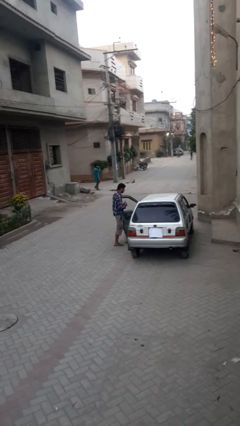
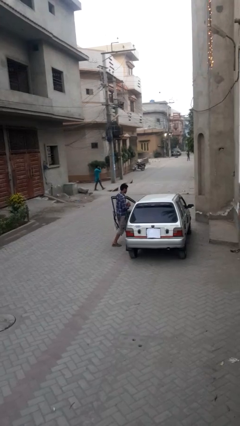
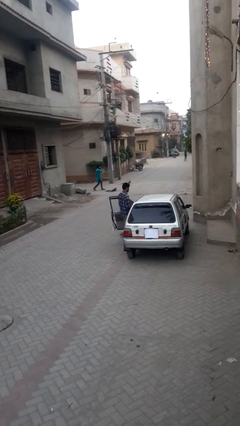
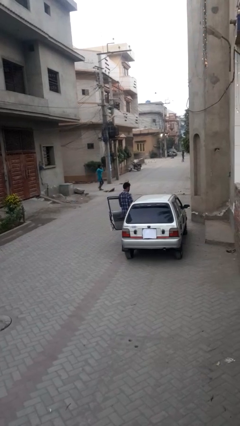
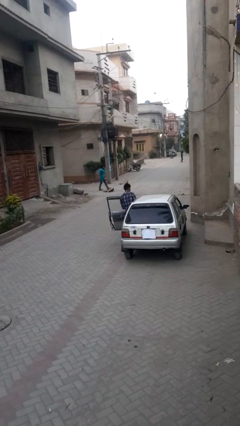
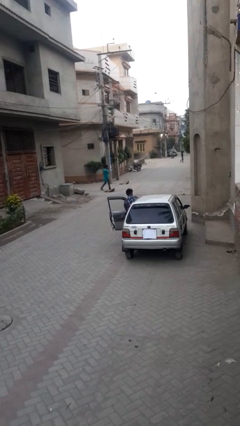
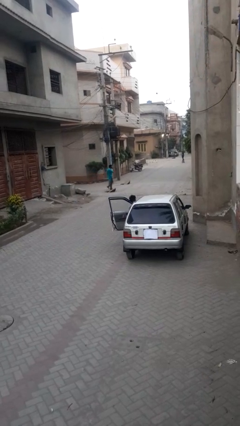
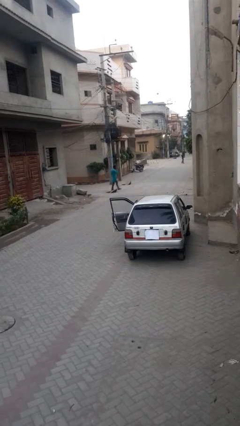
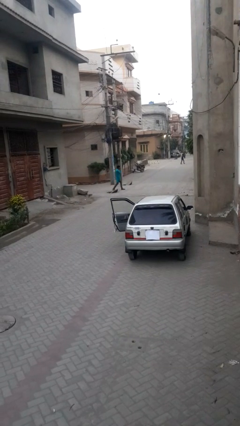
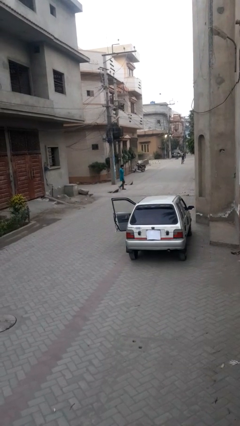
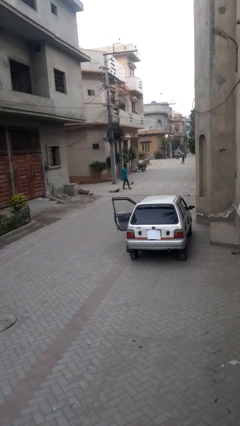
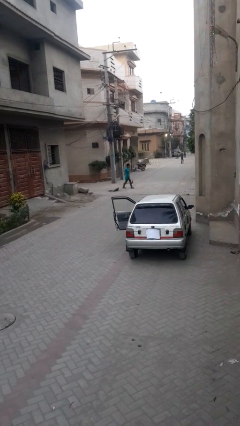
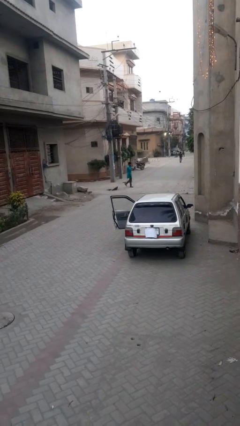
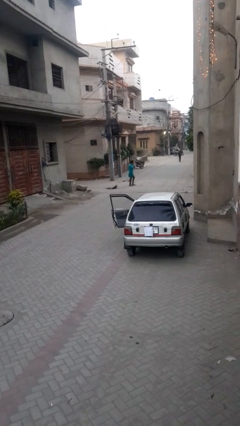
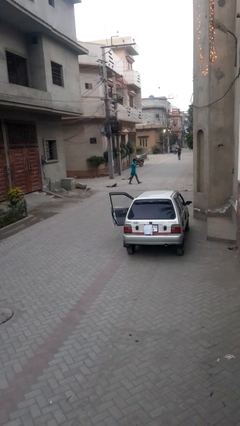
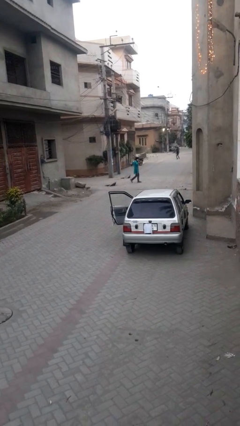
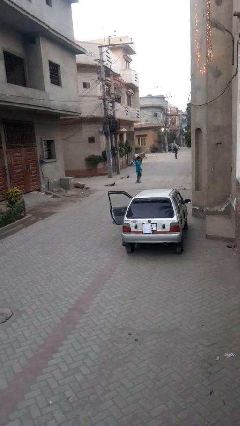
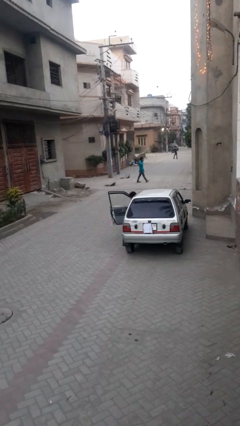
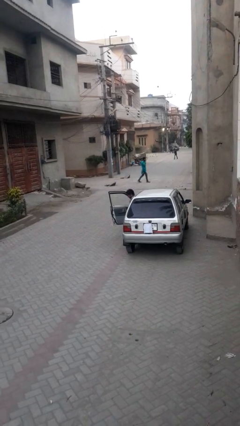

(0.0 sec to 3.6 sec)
person enters car

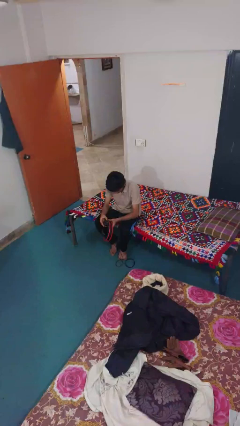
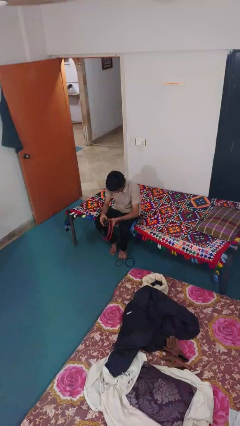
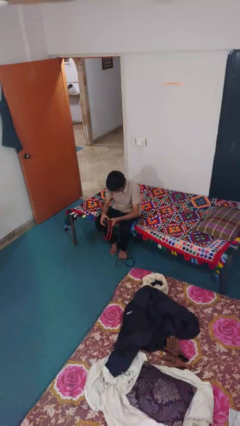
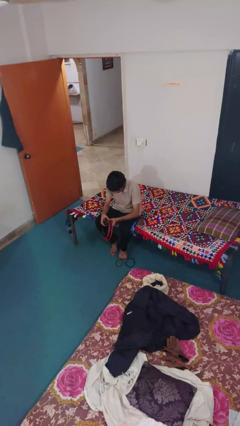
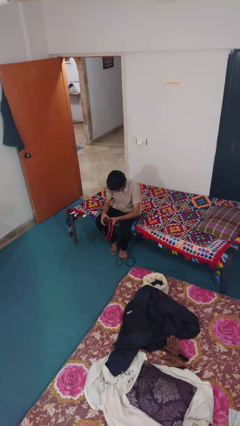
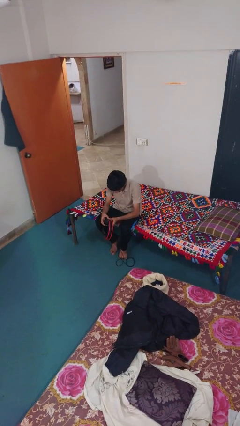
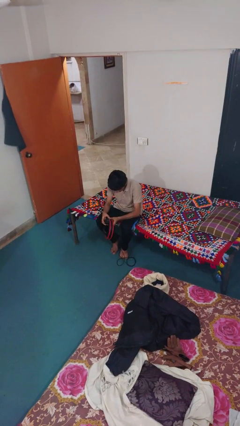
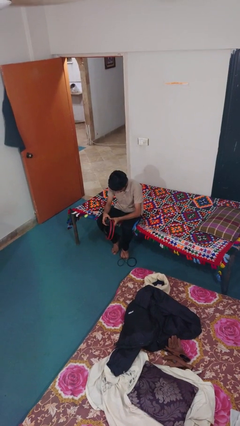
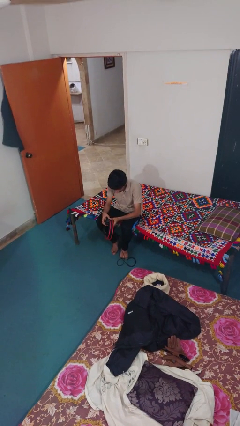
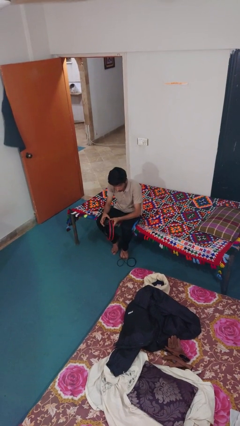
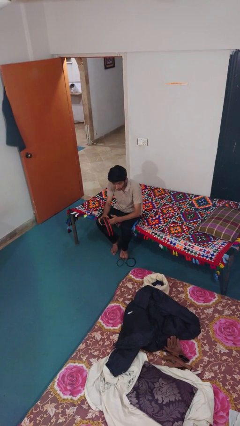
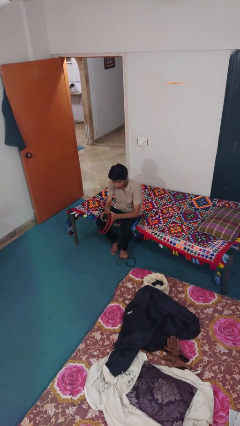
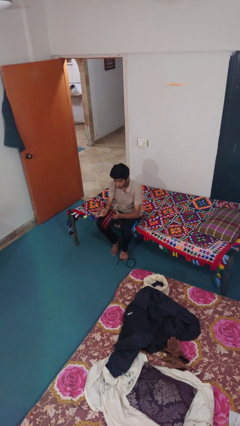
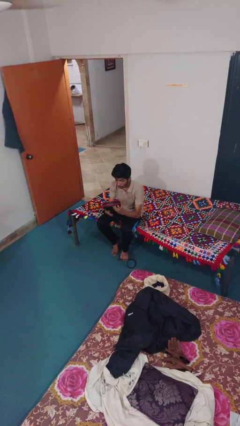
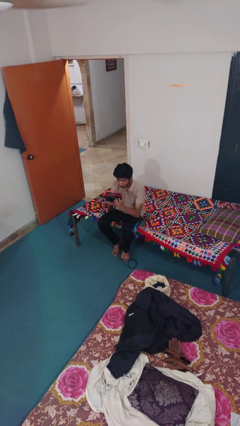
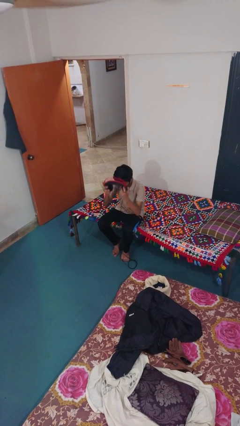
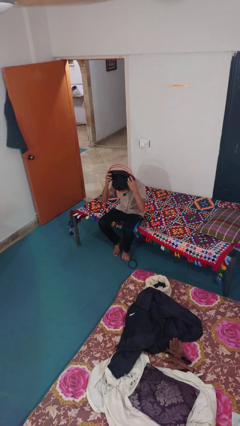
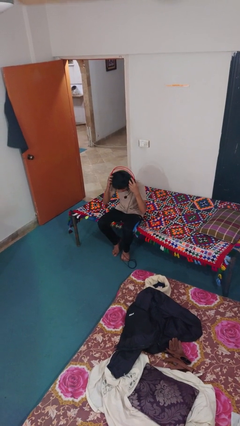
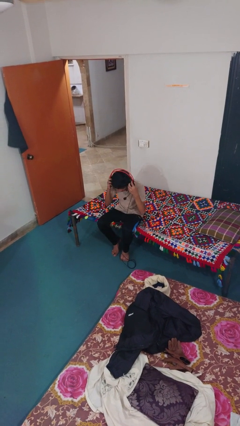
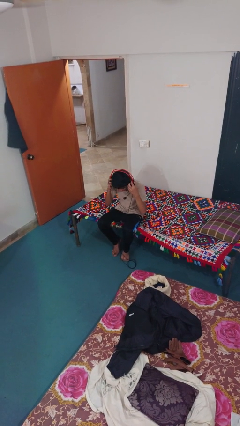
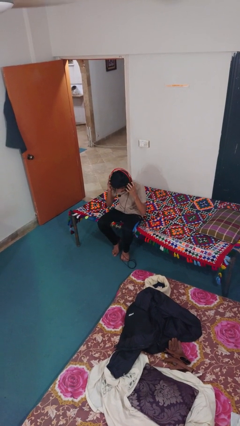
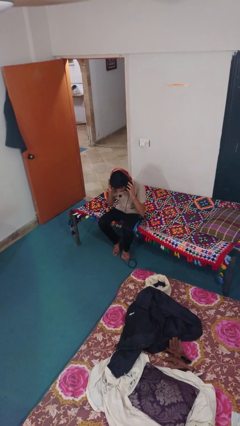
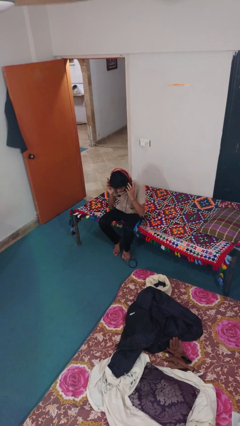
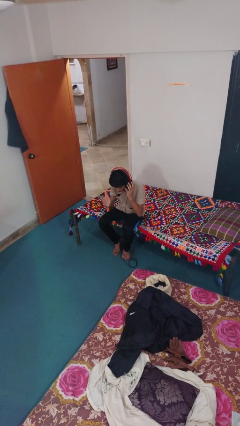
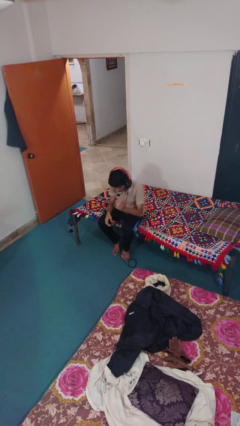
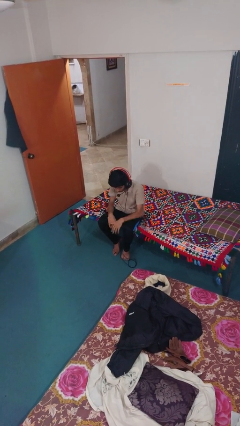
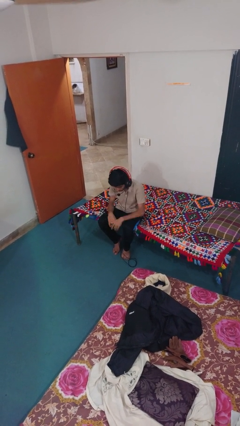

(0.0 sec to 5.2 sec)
person puts on headphones

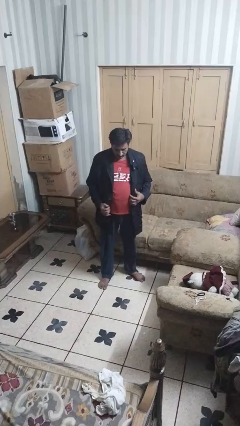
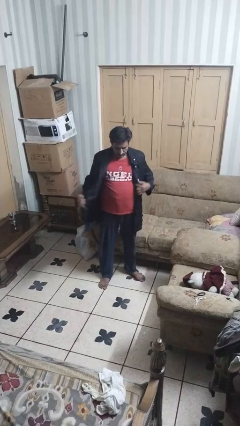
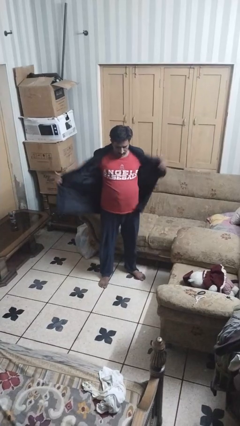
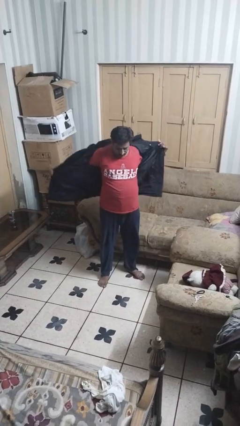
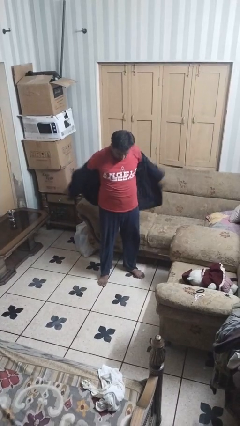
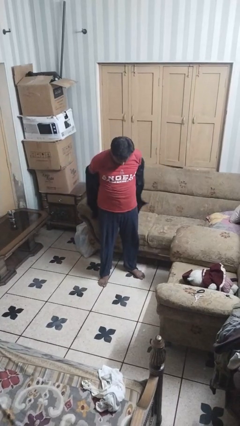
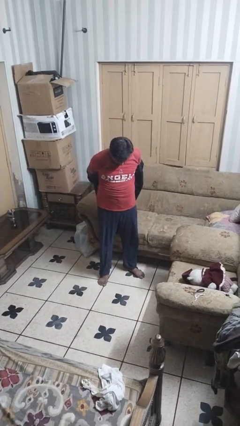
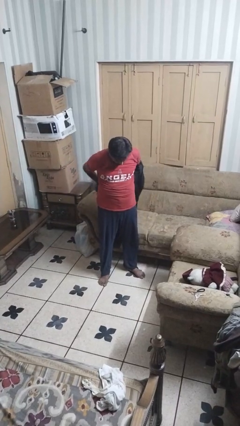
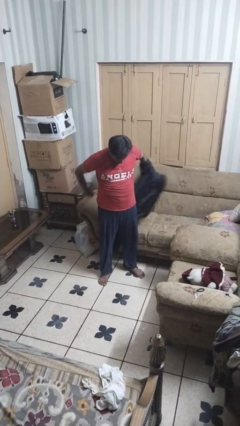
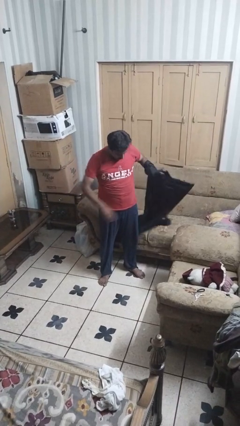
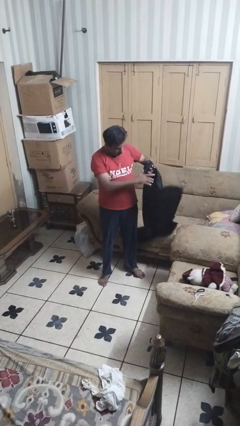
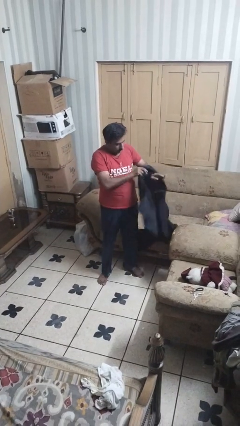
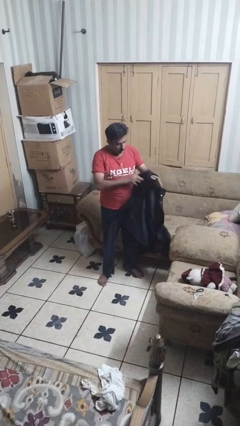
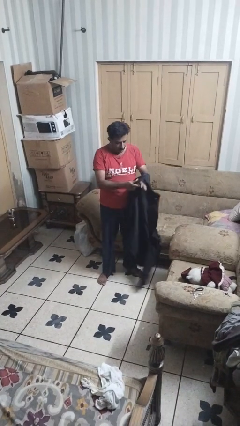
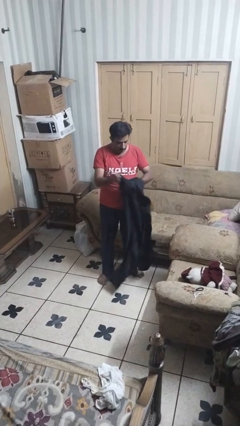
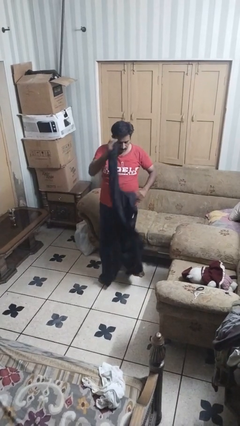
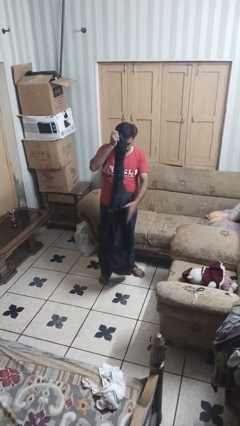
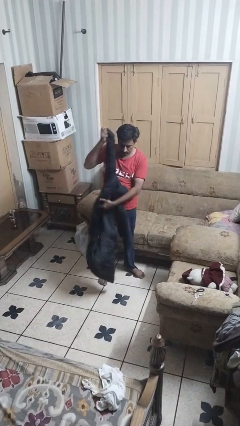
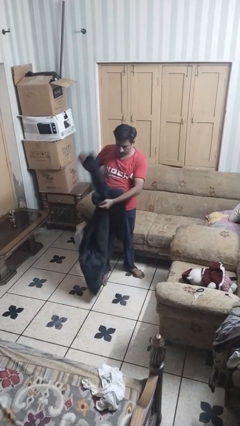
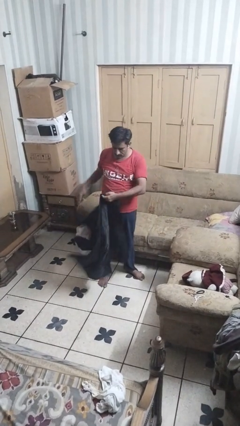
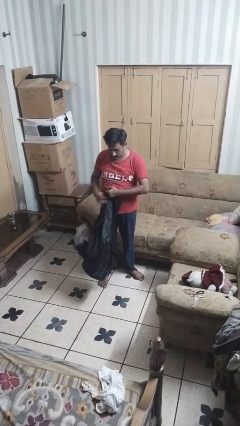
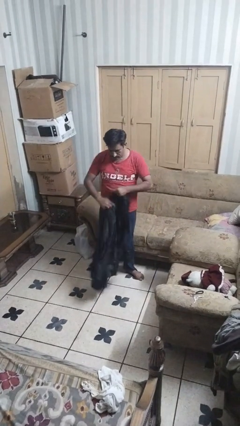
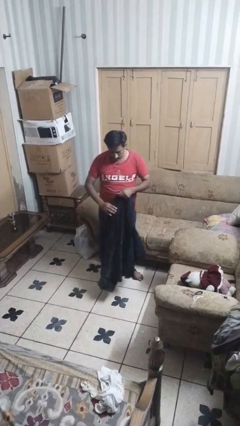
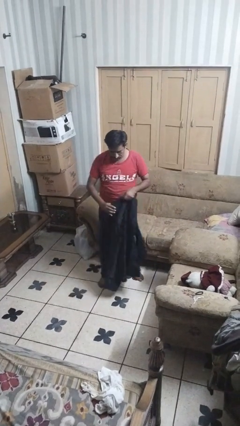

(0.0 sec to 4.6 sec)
person takes off jacket

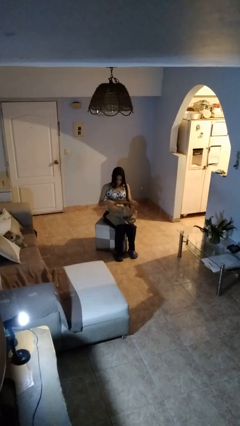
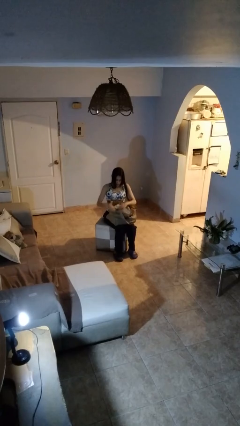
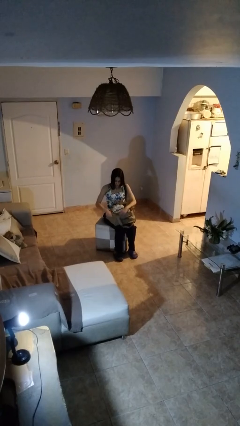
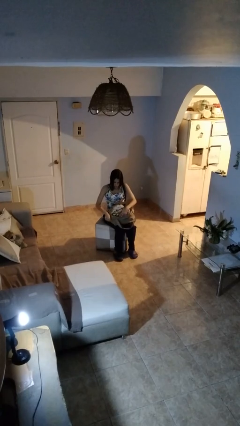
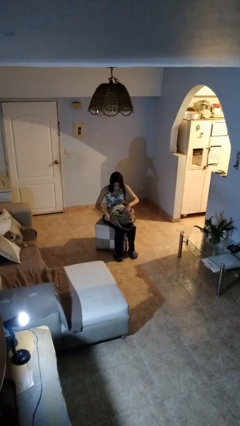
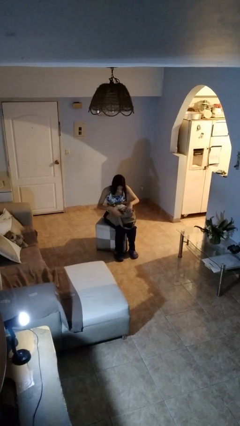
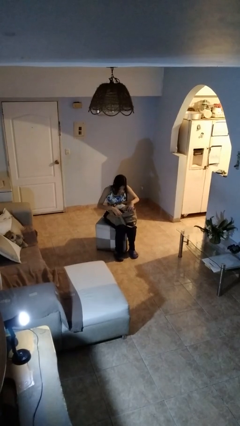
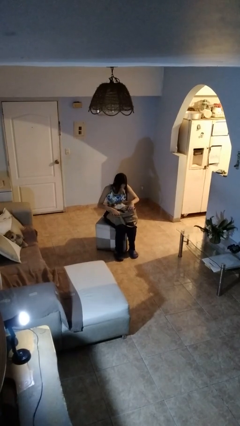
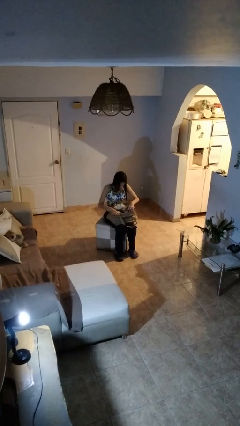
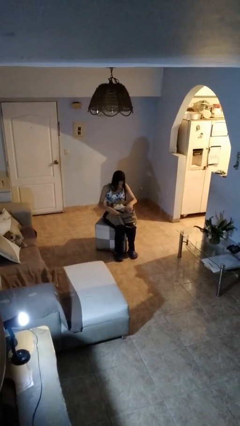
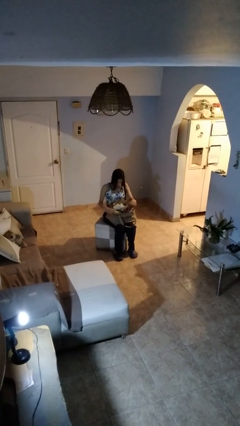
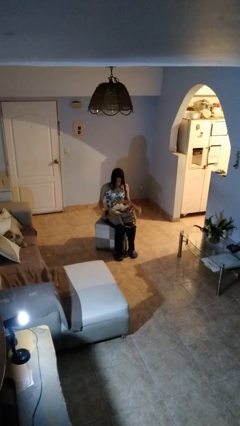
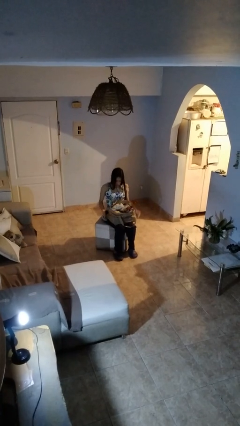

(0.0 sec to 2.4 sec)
person searches in bag

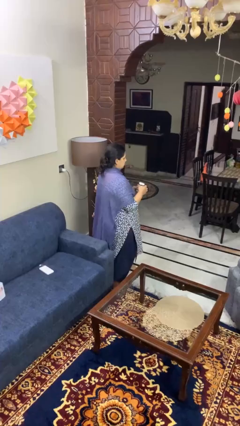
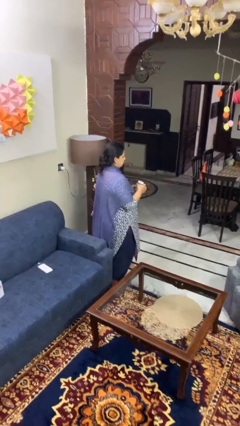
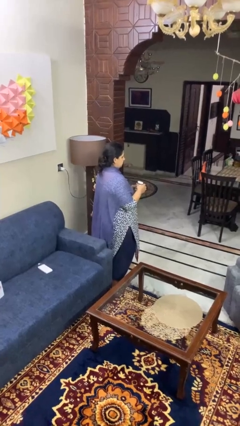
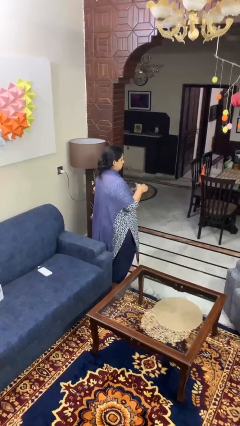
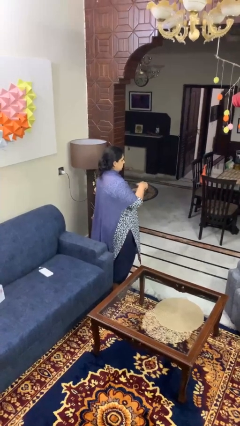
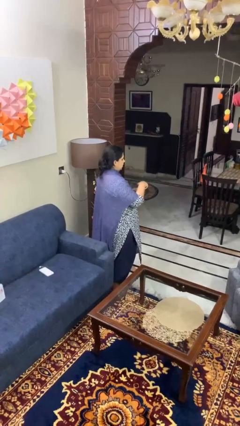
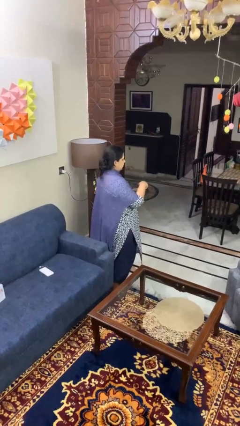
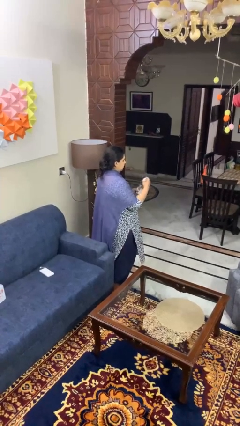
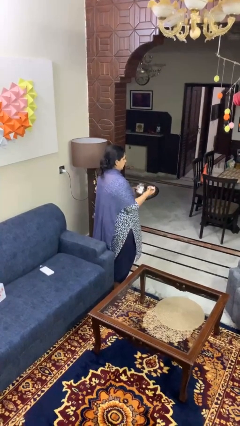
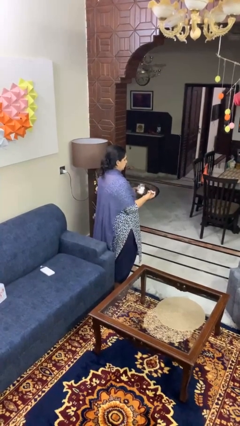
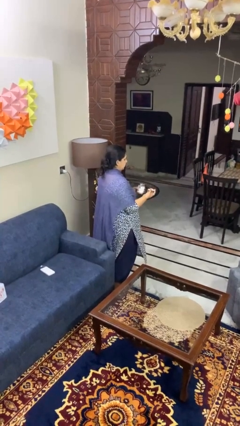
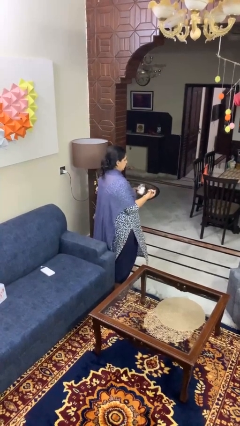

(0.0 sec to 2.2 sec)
person opens jar
